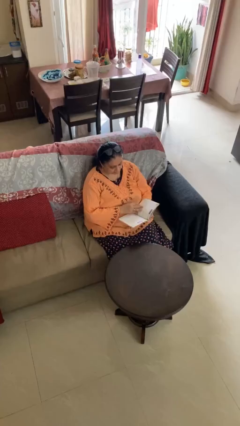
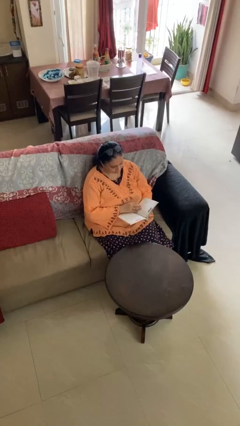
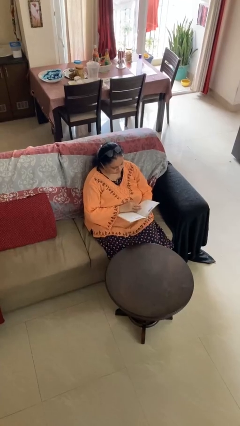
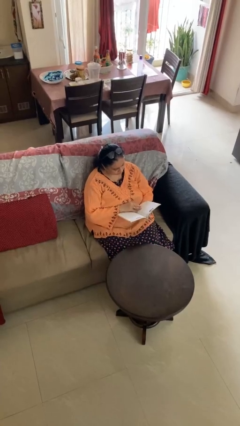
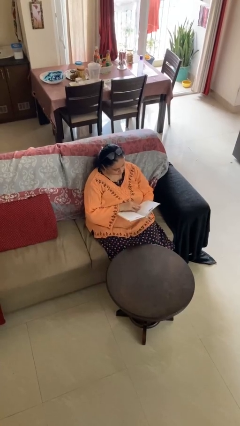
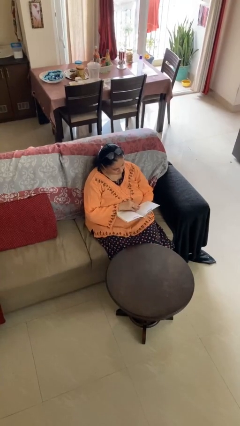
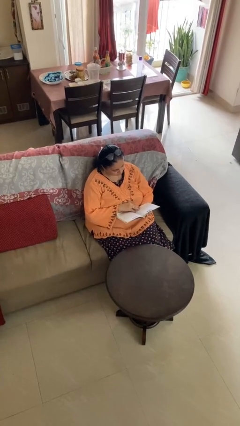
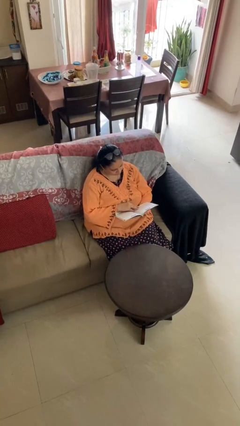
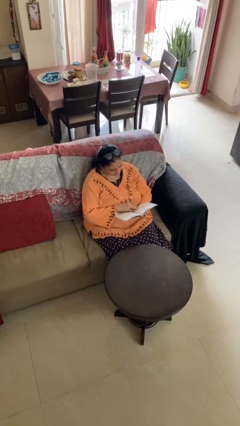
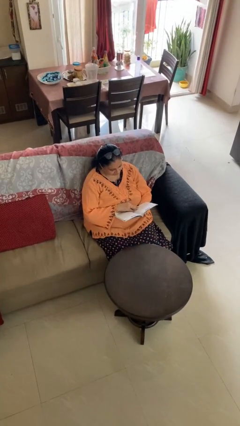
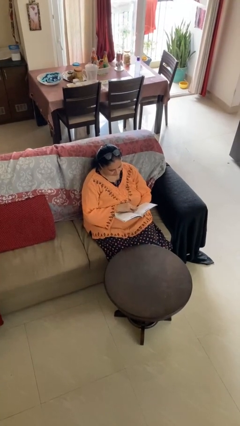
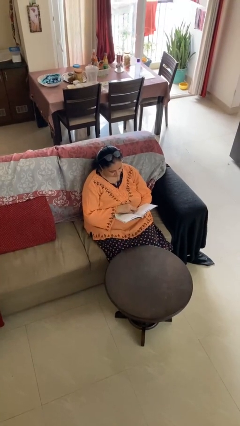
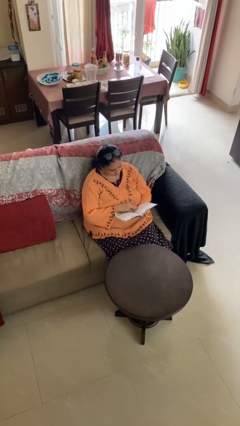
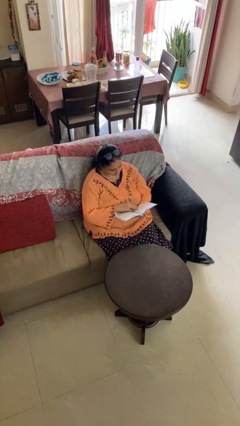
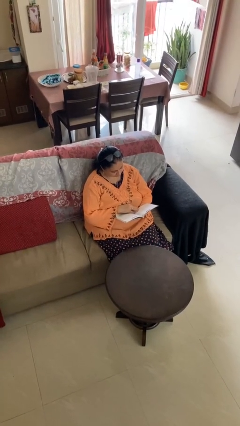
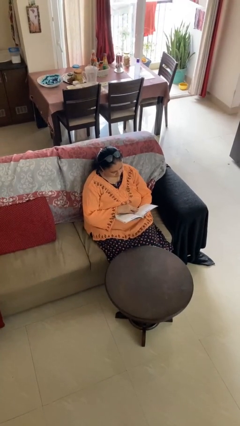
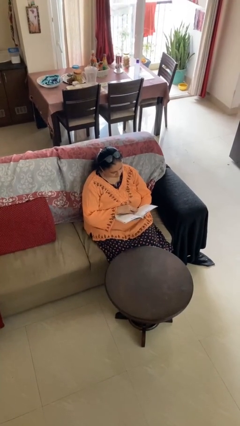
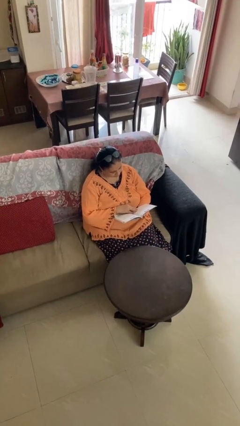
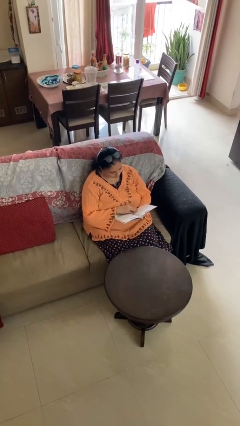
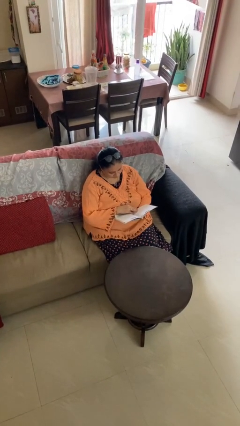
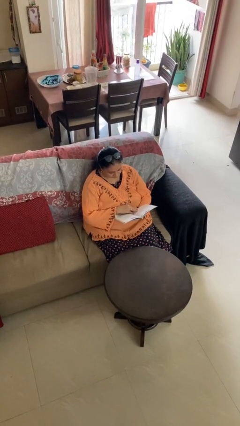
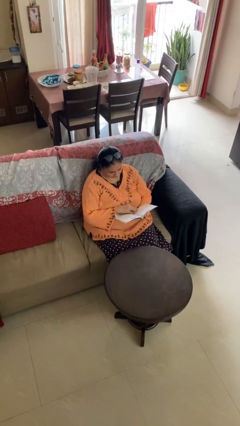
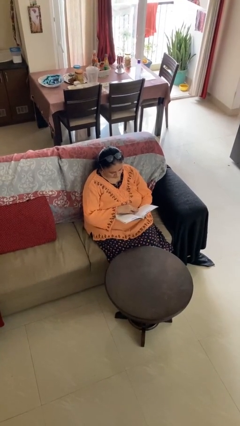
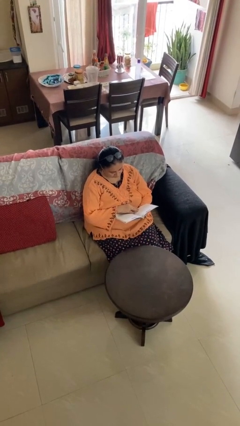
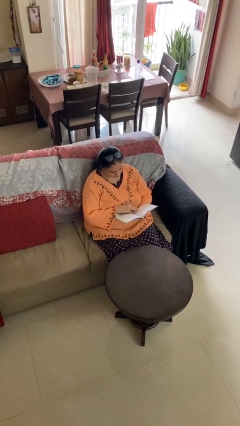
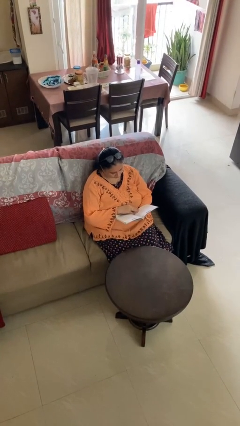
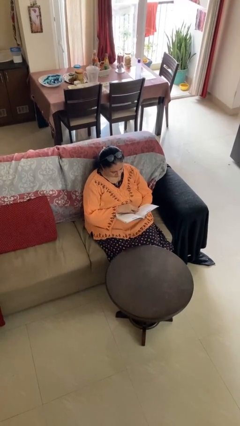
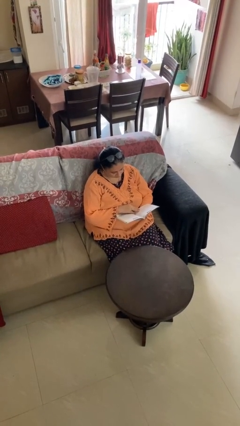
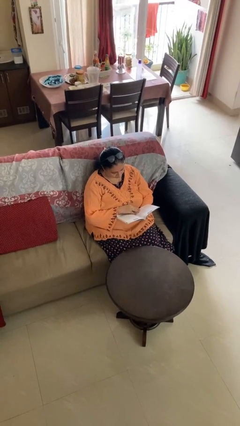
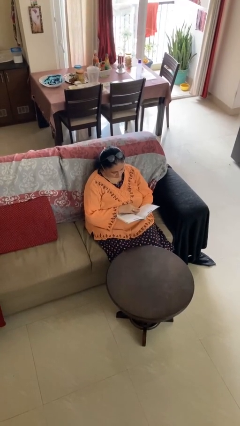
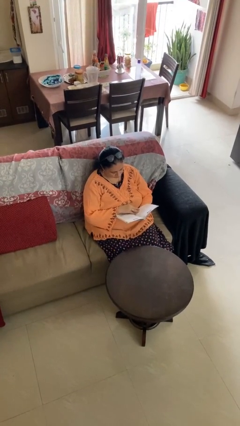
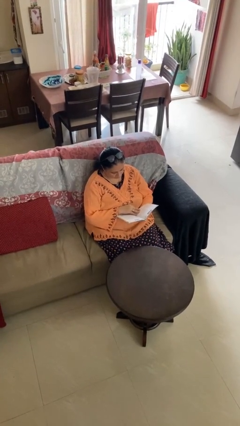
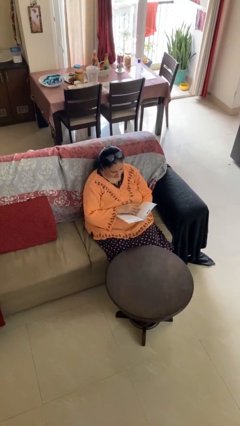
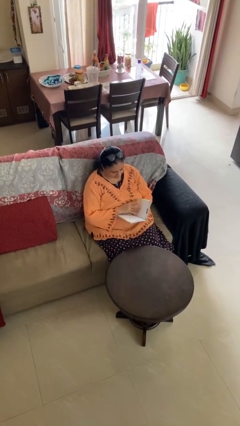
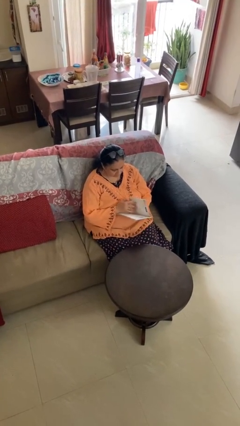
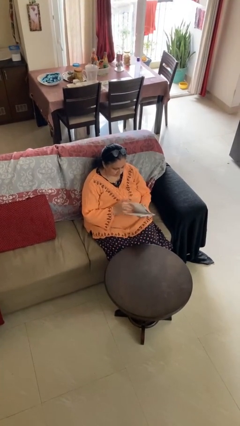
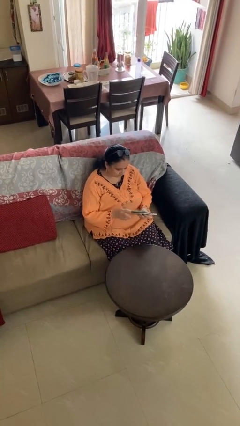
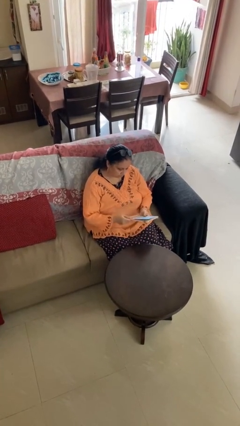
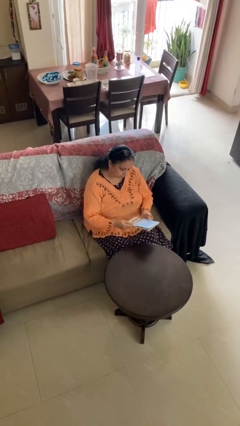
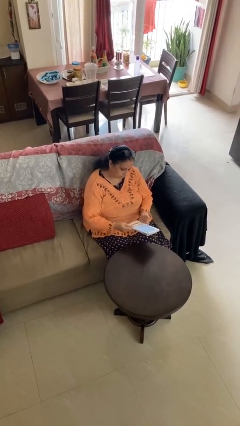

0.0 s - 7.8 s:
person reads document

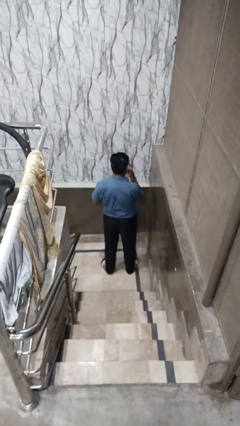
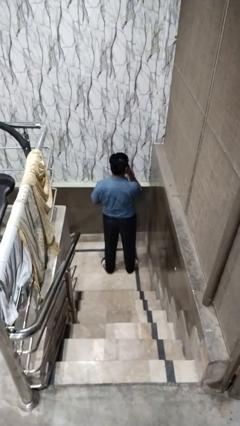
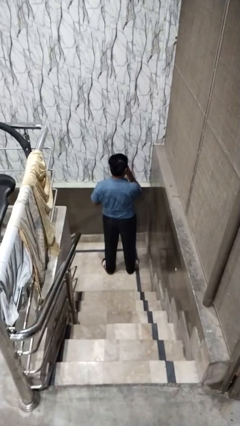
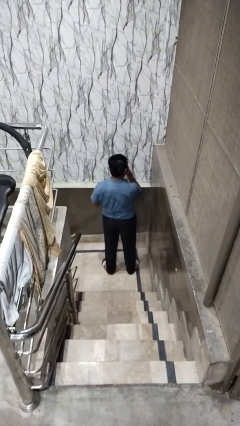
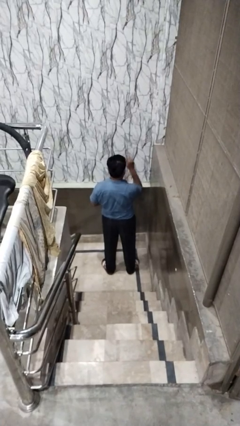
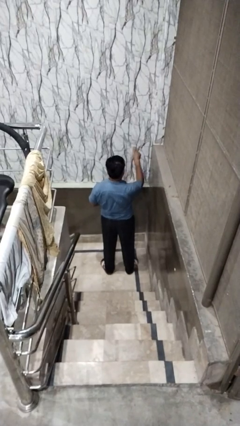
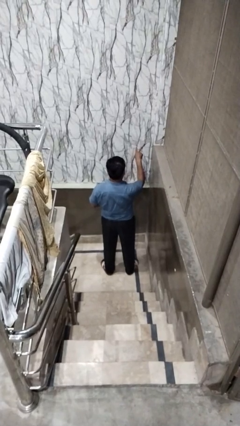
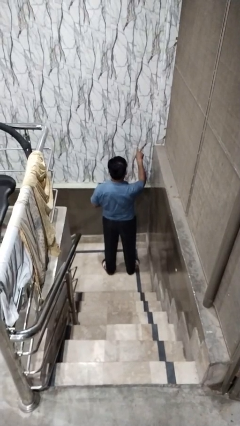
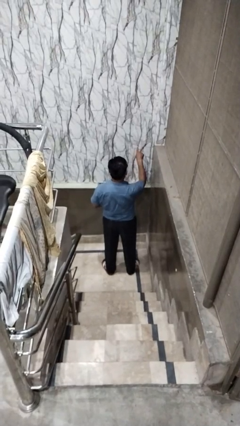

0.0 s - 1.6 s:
person gestures watch closely

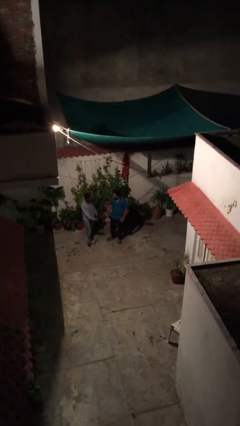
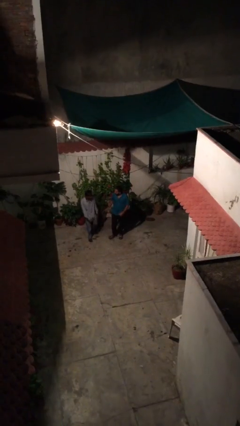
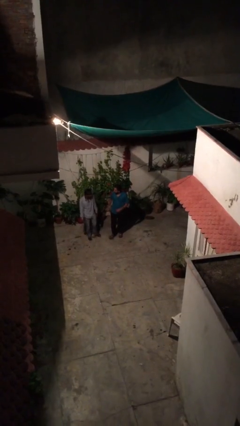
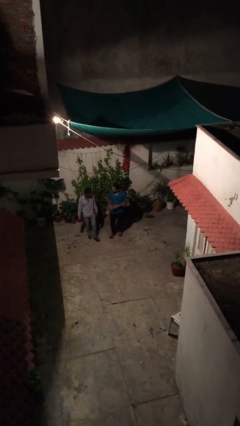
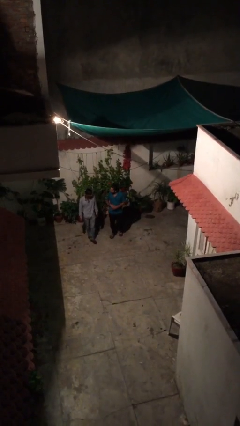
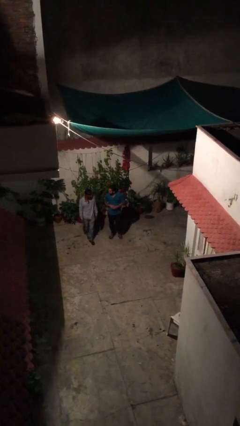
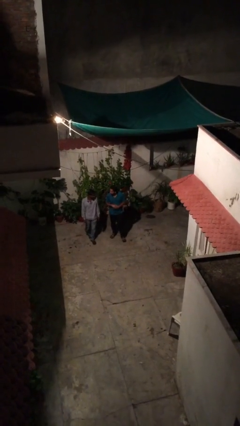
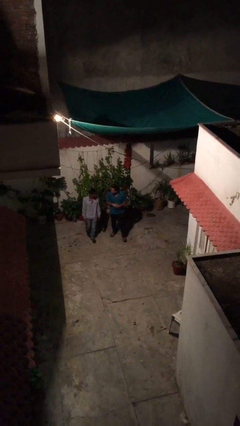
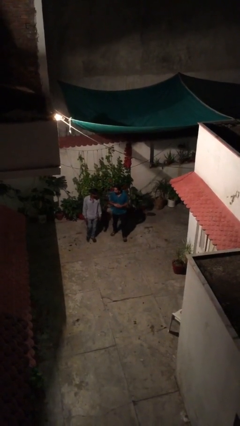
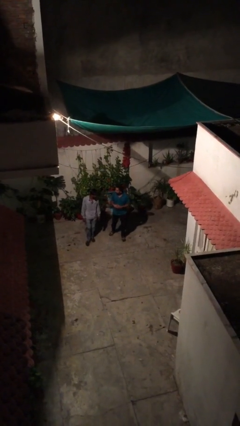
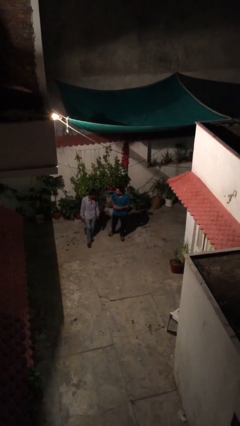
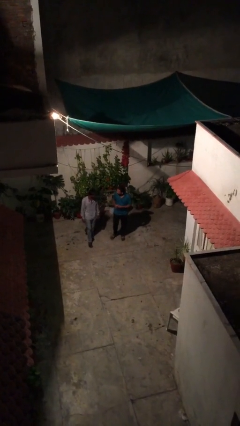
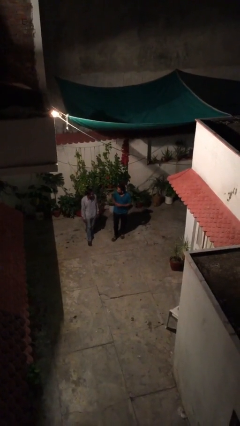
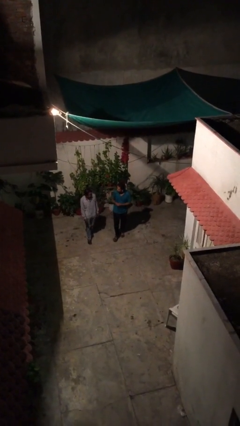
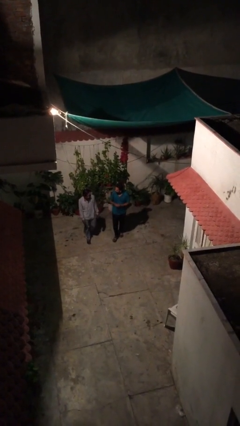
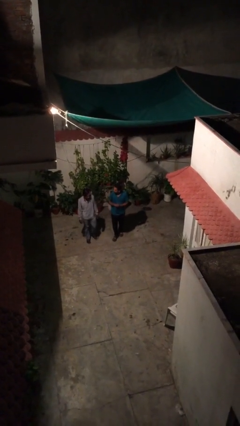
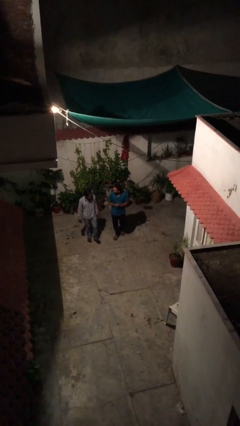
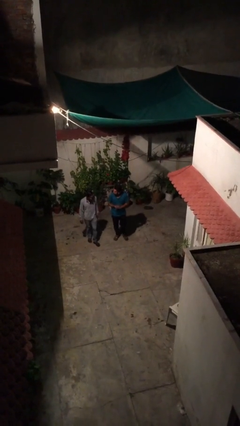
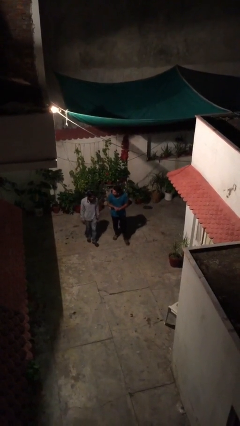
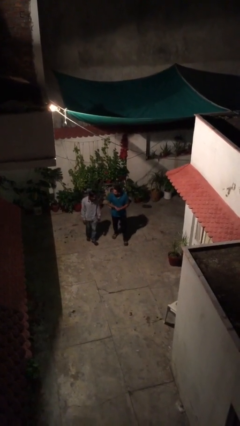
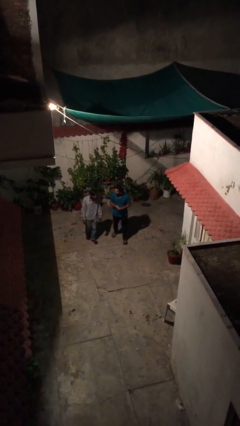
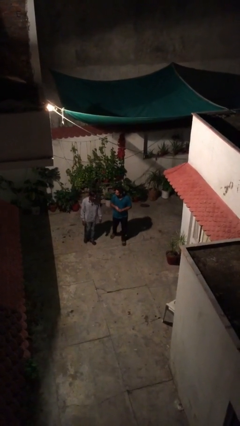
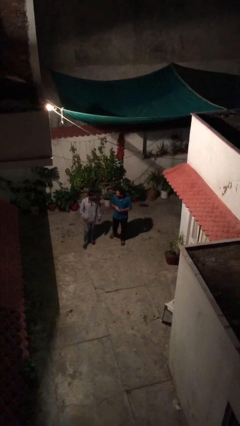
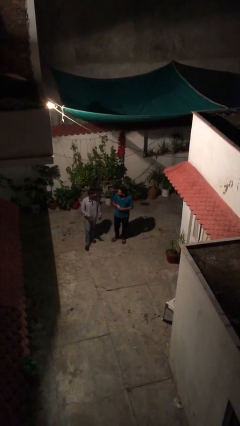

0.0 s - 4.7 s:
person talks to person

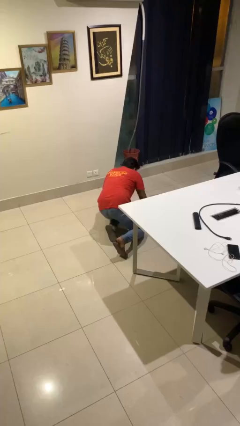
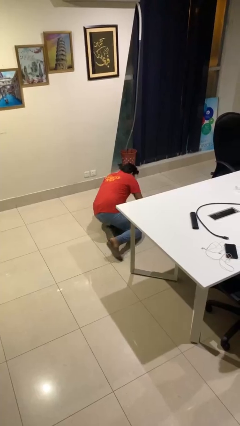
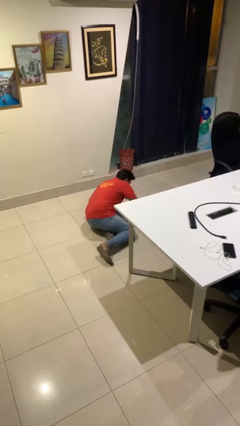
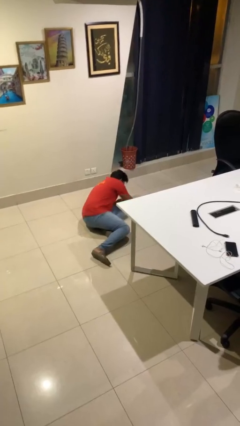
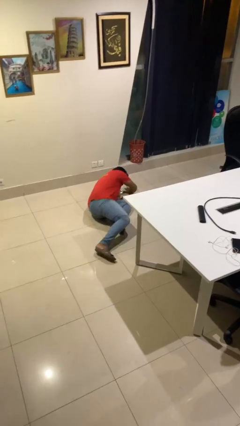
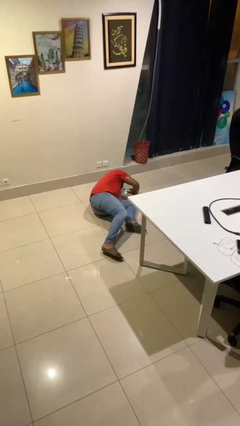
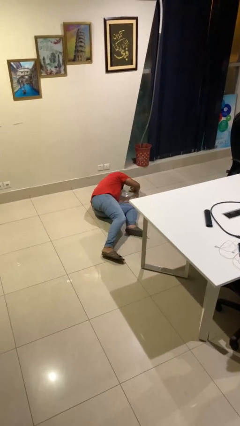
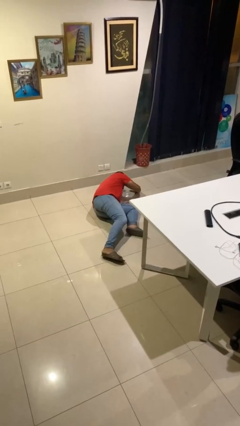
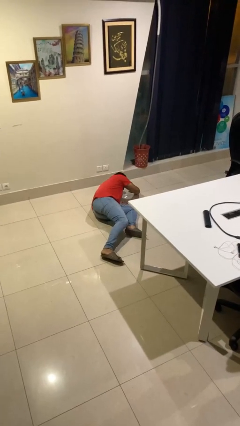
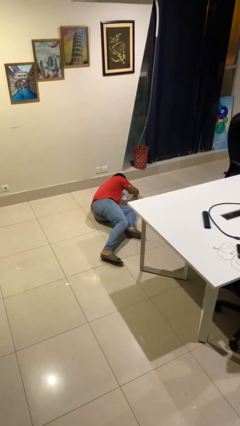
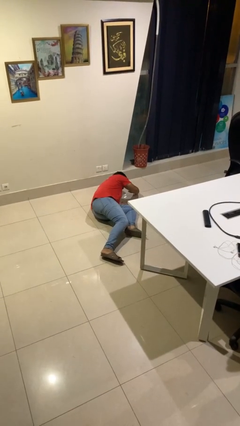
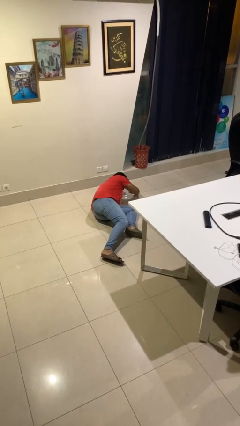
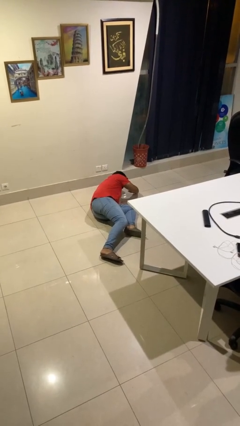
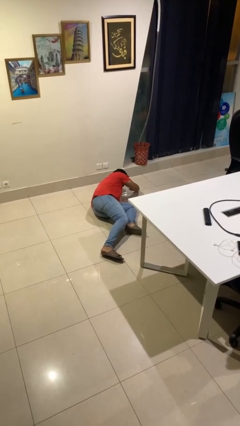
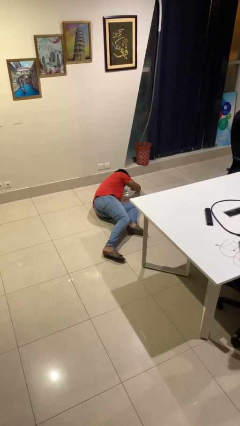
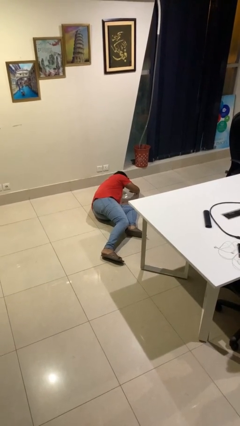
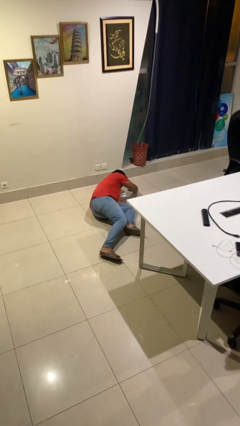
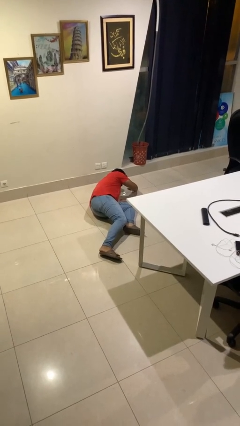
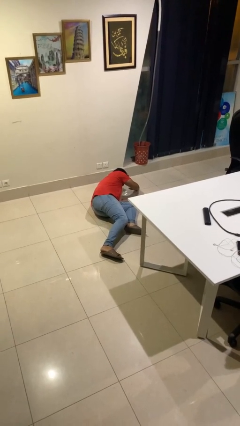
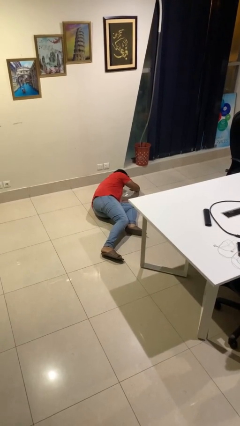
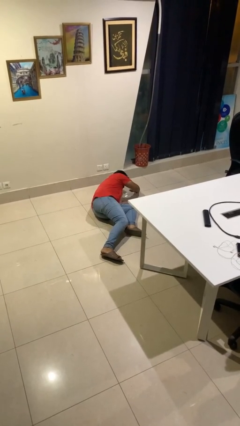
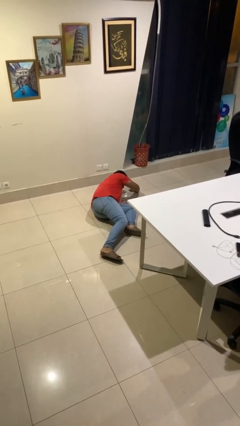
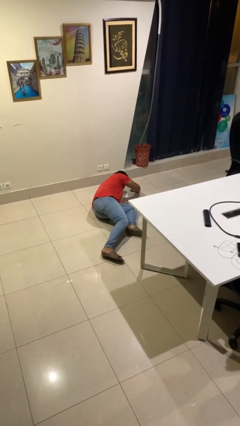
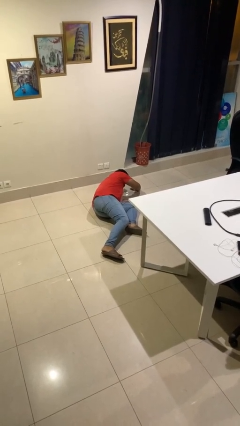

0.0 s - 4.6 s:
person lies down on floor
